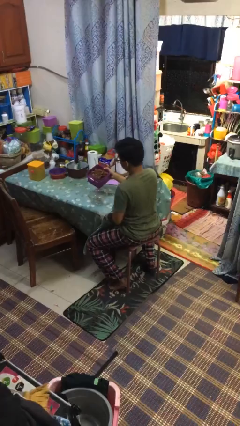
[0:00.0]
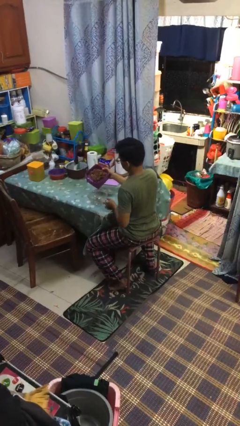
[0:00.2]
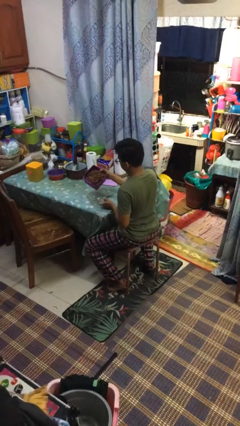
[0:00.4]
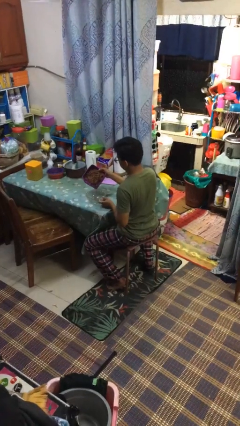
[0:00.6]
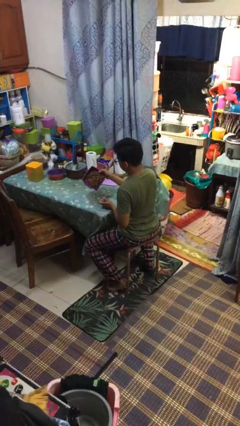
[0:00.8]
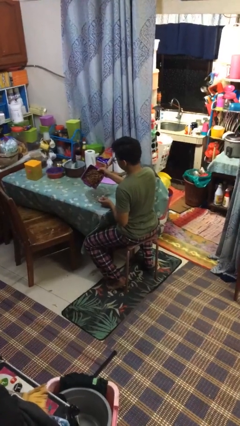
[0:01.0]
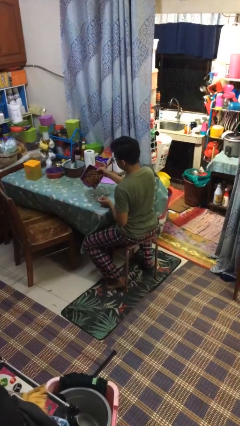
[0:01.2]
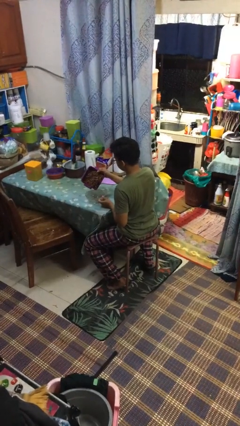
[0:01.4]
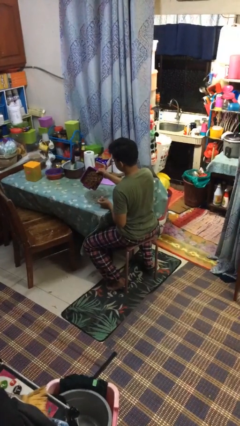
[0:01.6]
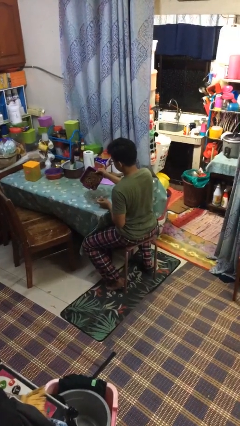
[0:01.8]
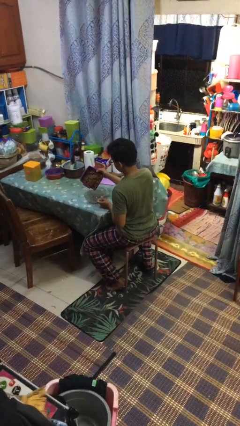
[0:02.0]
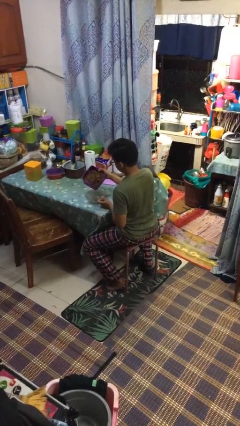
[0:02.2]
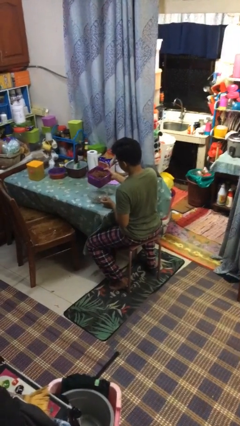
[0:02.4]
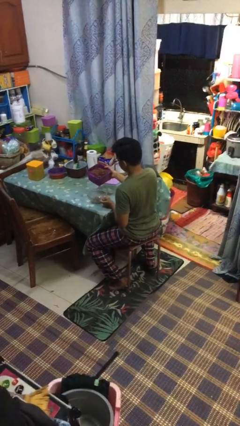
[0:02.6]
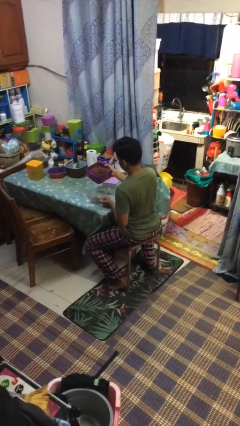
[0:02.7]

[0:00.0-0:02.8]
person pours into bowl

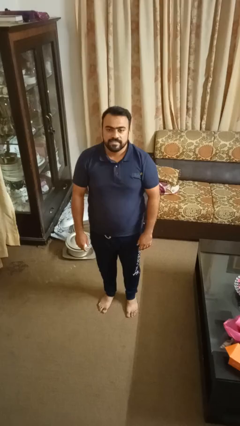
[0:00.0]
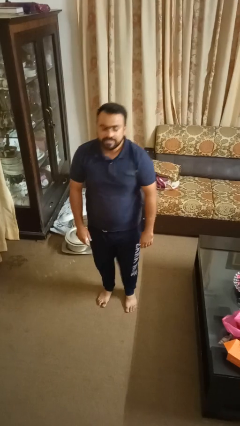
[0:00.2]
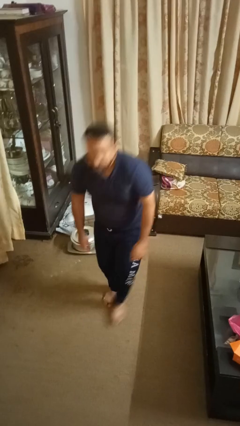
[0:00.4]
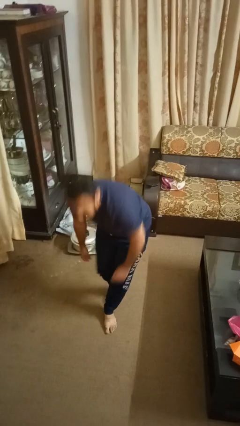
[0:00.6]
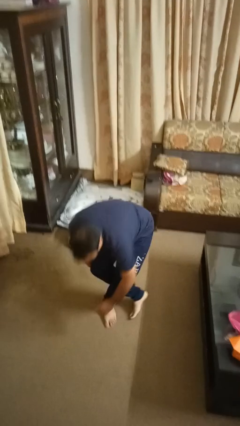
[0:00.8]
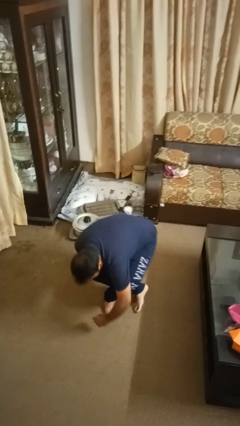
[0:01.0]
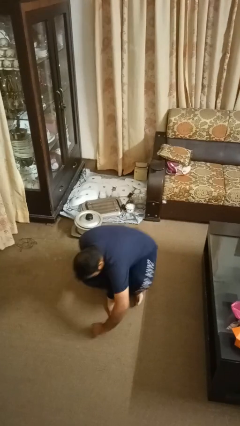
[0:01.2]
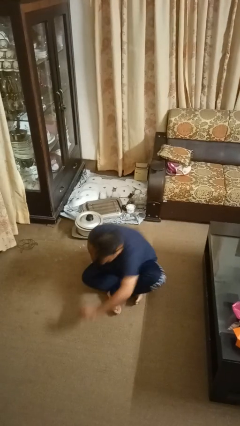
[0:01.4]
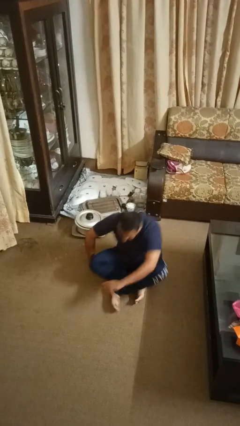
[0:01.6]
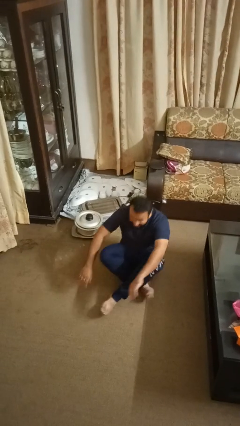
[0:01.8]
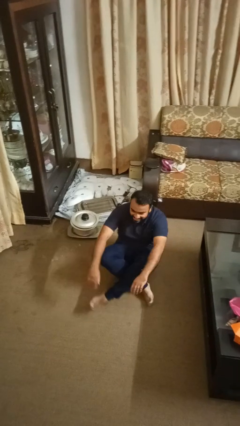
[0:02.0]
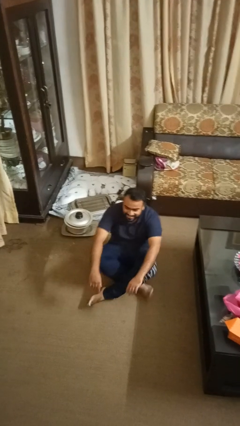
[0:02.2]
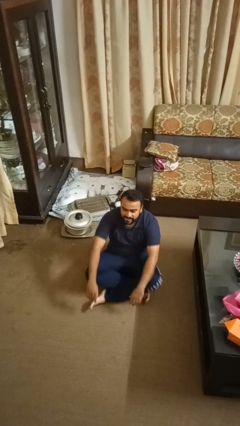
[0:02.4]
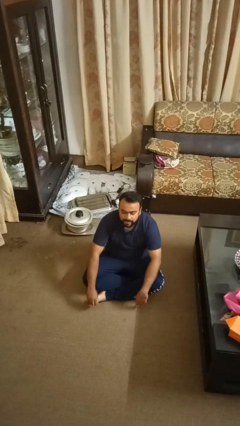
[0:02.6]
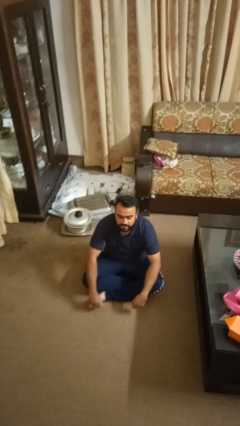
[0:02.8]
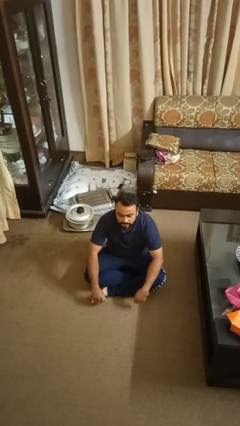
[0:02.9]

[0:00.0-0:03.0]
person sits crisscross

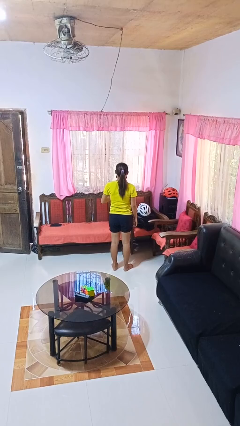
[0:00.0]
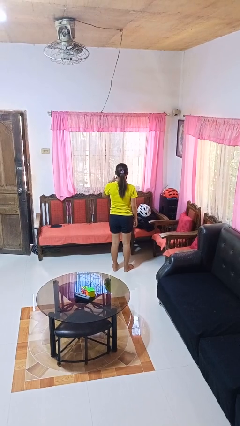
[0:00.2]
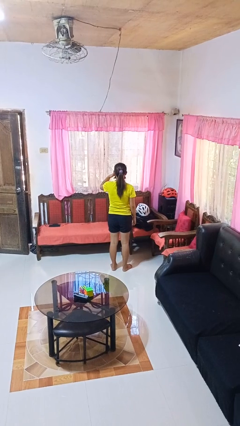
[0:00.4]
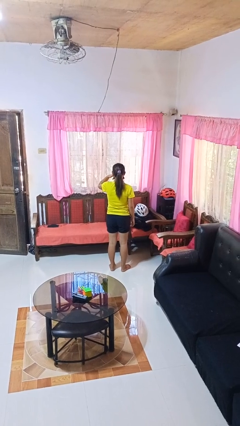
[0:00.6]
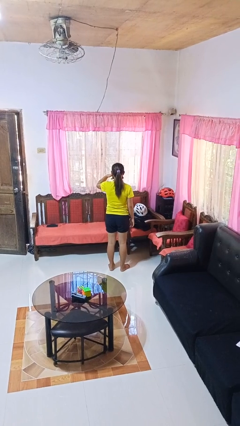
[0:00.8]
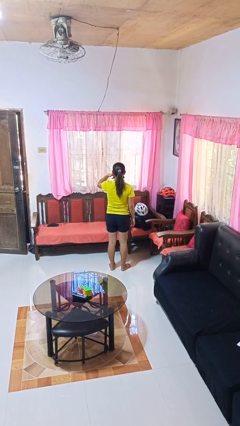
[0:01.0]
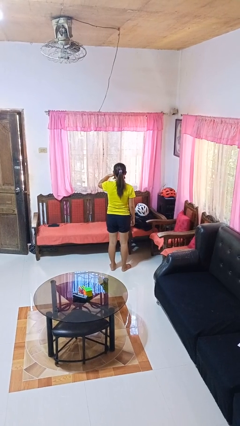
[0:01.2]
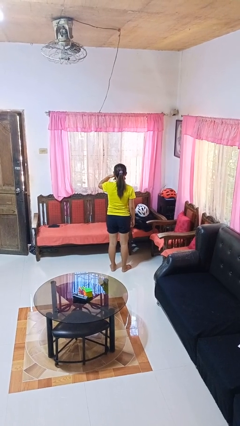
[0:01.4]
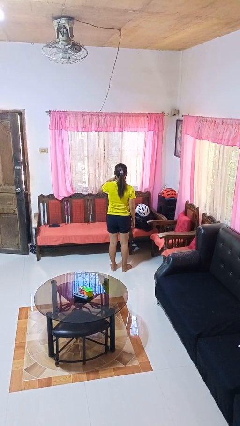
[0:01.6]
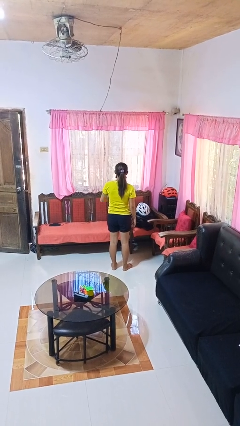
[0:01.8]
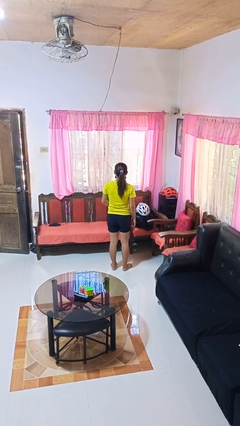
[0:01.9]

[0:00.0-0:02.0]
person gestures call me

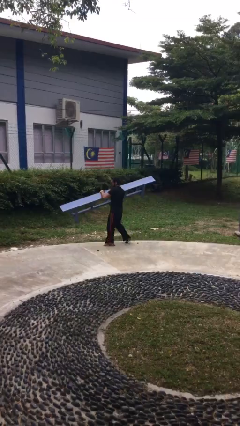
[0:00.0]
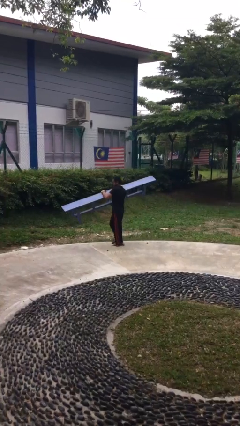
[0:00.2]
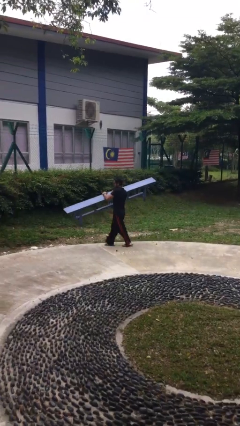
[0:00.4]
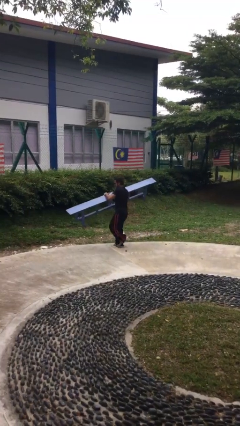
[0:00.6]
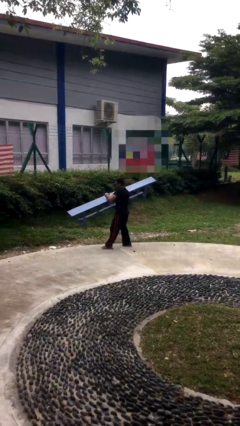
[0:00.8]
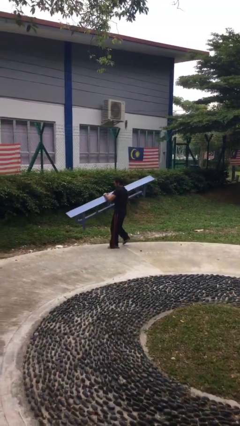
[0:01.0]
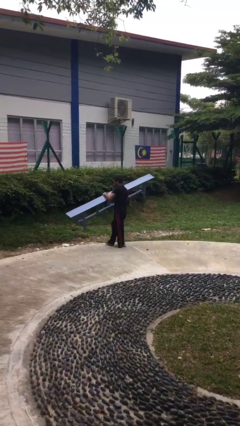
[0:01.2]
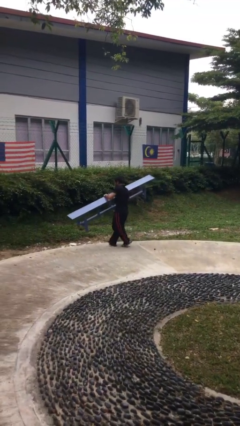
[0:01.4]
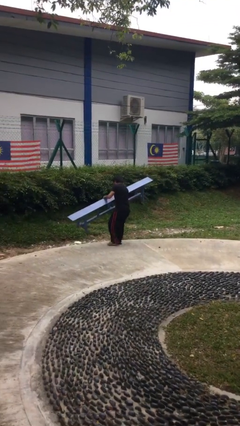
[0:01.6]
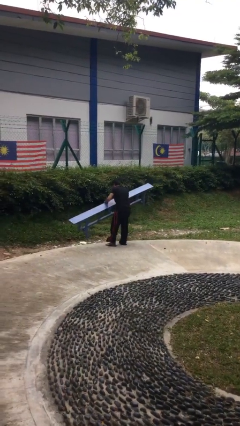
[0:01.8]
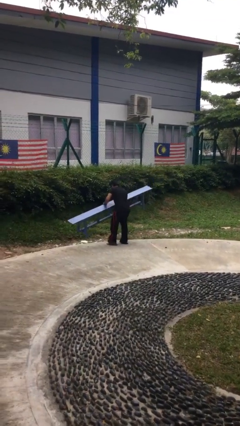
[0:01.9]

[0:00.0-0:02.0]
person carries heavy object

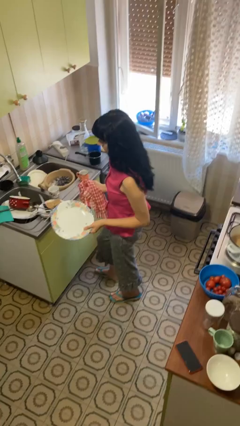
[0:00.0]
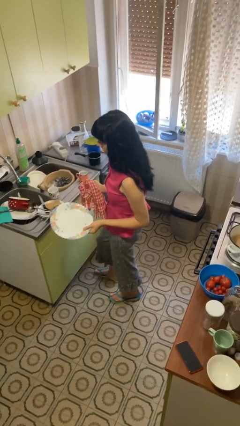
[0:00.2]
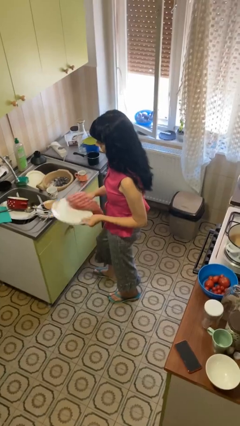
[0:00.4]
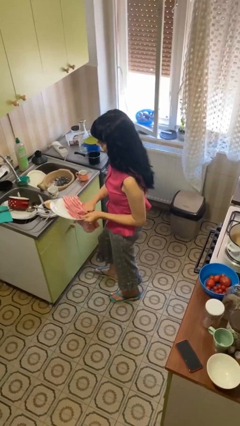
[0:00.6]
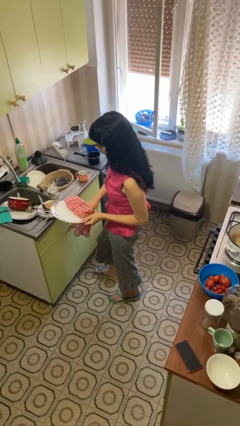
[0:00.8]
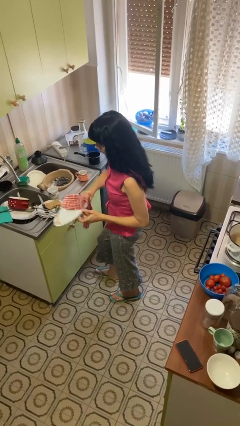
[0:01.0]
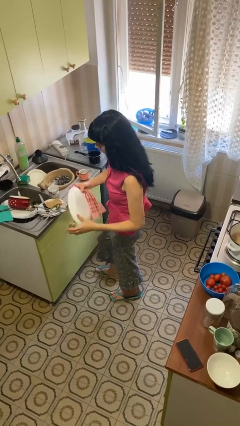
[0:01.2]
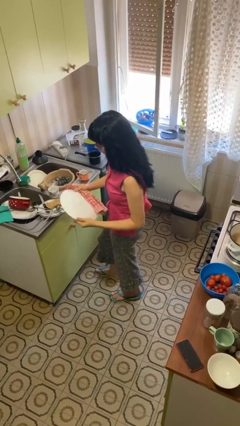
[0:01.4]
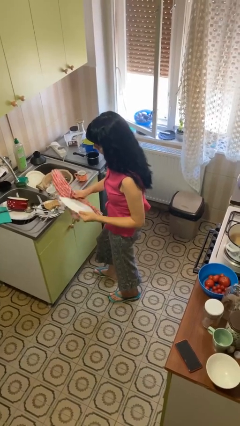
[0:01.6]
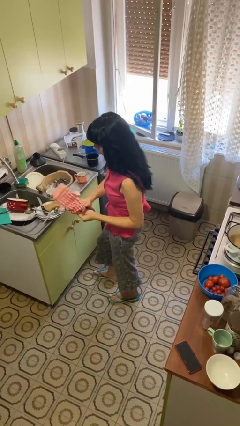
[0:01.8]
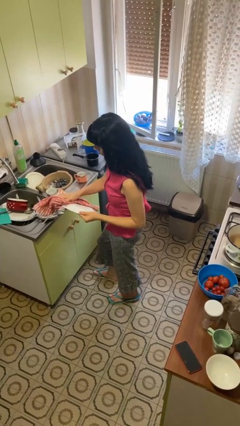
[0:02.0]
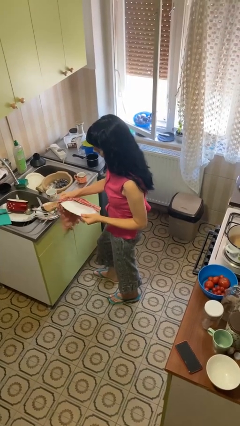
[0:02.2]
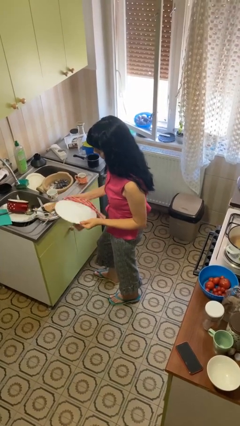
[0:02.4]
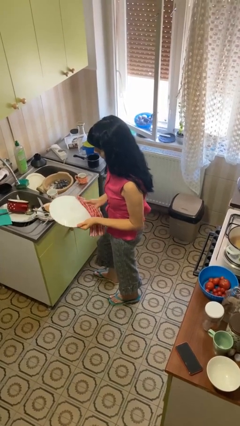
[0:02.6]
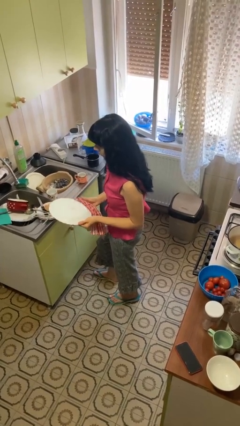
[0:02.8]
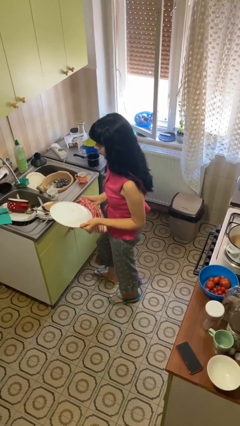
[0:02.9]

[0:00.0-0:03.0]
person dries dish

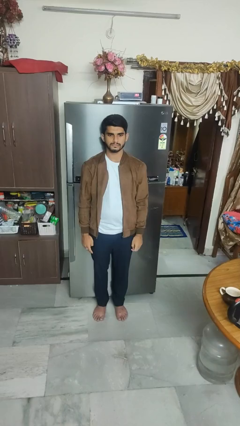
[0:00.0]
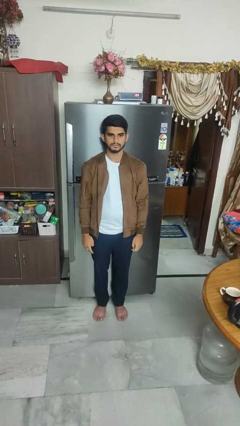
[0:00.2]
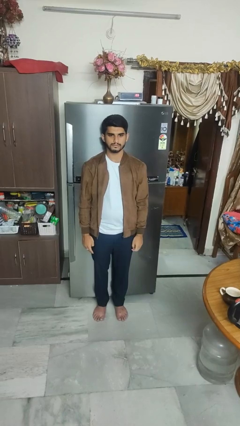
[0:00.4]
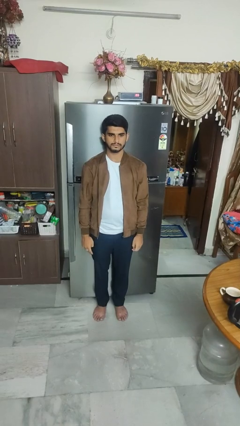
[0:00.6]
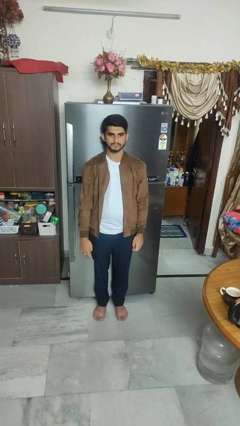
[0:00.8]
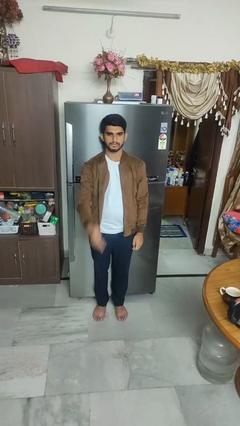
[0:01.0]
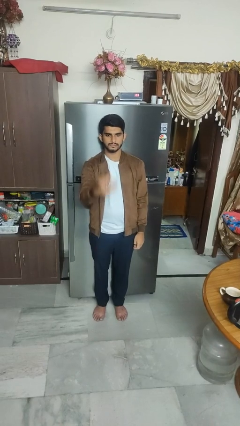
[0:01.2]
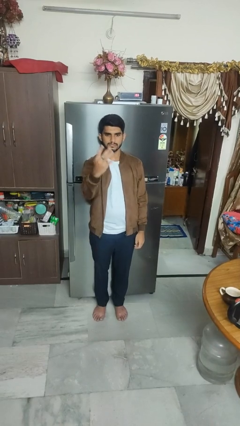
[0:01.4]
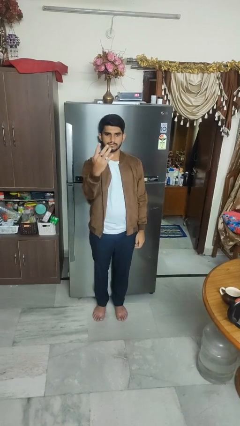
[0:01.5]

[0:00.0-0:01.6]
person gestures number four

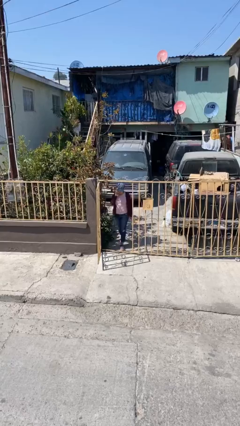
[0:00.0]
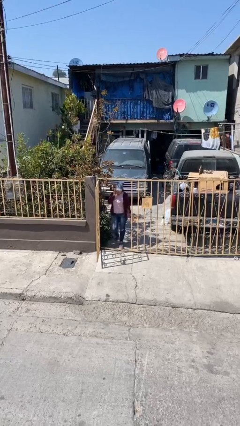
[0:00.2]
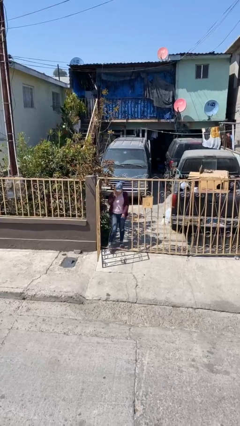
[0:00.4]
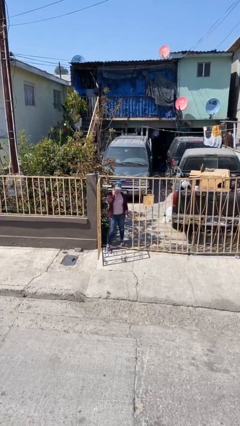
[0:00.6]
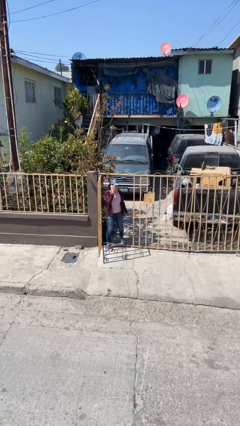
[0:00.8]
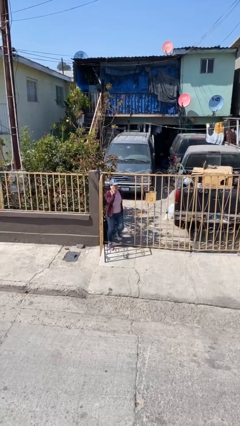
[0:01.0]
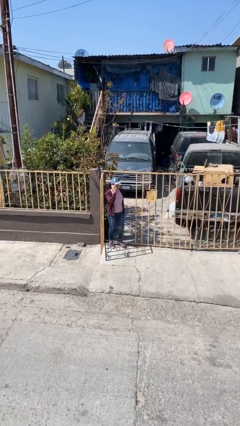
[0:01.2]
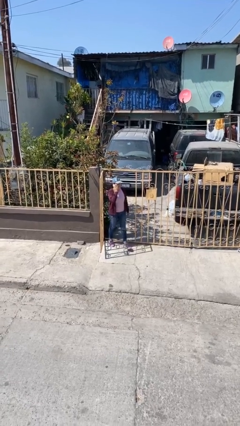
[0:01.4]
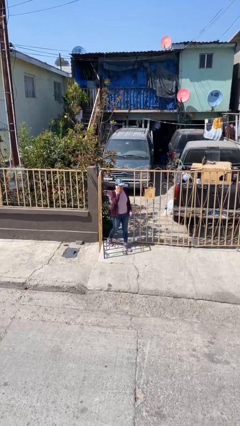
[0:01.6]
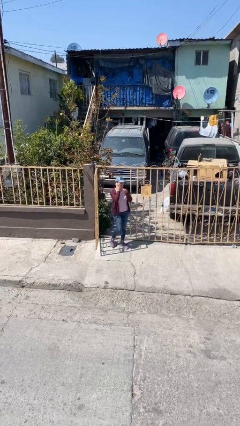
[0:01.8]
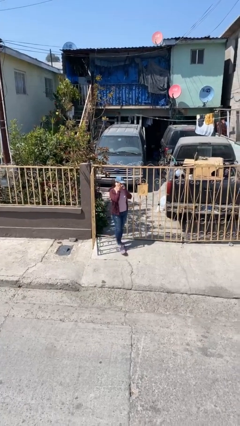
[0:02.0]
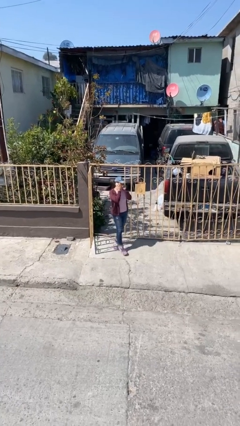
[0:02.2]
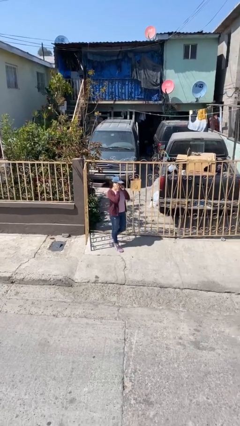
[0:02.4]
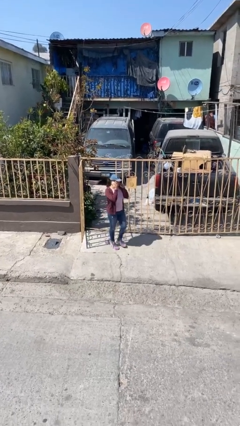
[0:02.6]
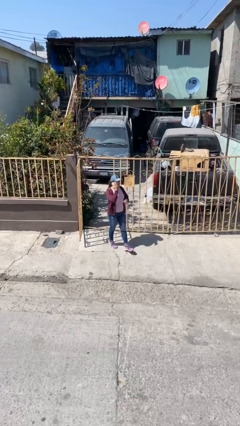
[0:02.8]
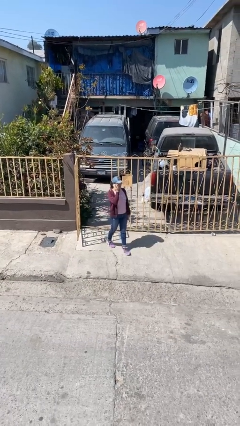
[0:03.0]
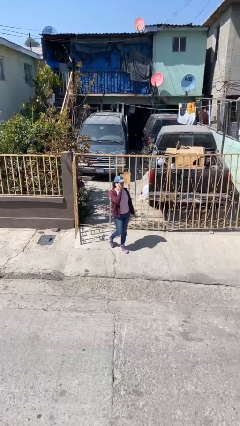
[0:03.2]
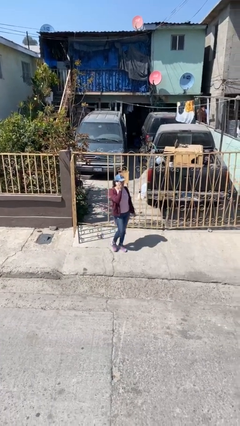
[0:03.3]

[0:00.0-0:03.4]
person enters scene through structure
